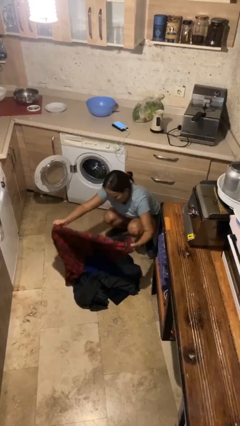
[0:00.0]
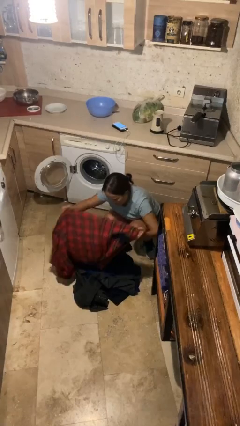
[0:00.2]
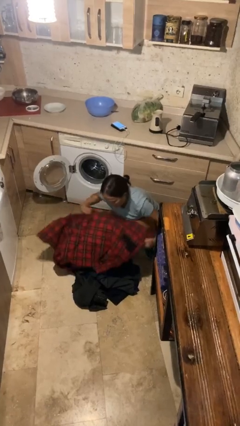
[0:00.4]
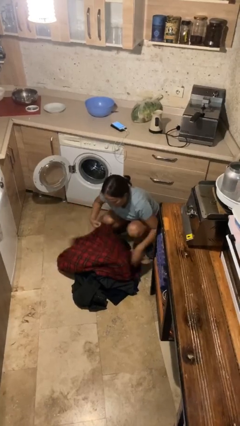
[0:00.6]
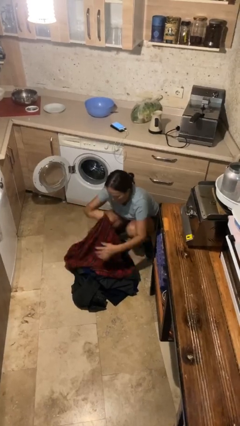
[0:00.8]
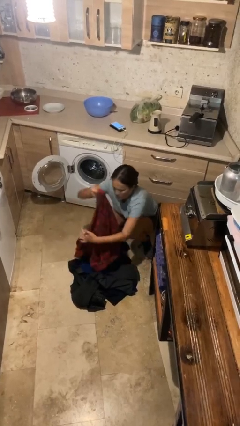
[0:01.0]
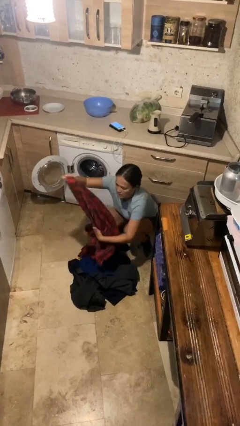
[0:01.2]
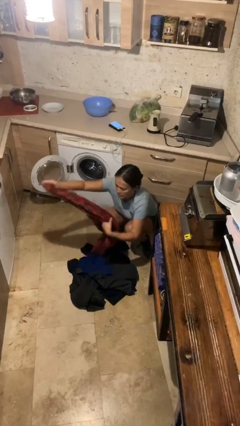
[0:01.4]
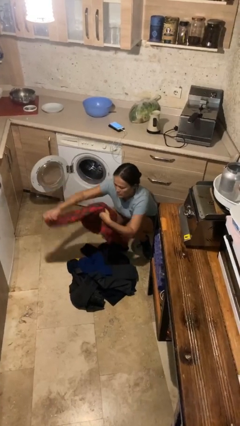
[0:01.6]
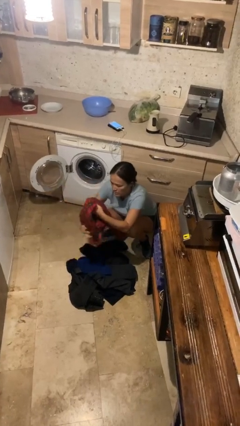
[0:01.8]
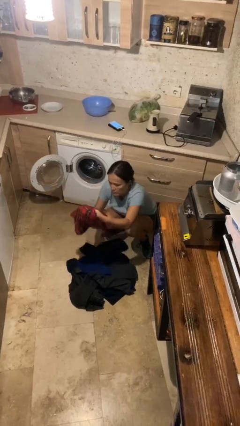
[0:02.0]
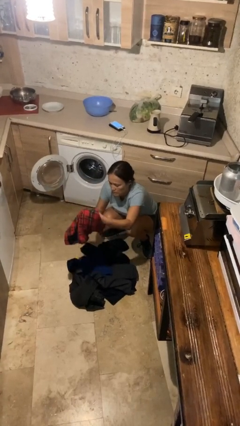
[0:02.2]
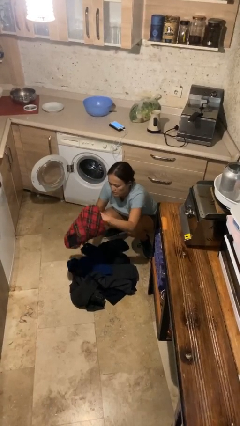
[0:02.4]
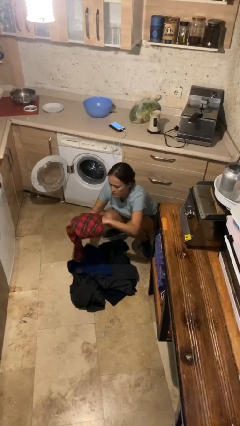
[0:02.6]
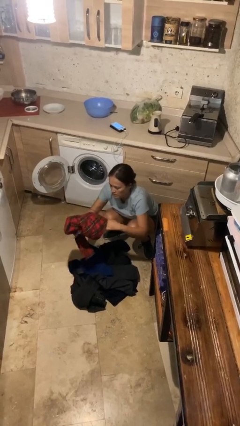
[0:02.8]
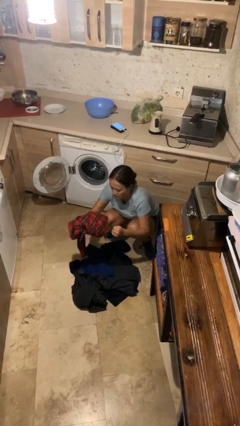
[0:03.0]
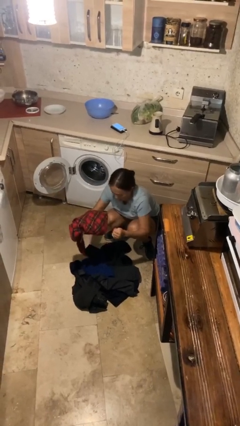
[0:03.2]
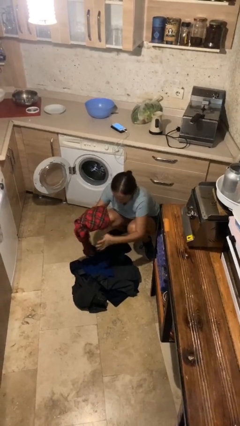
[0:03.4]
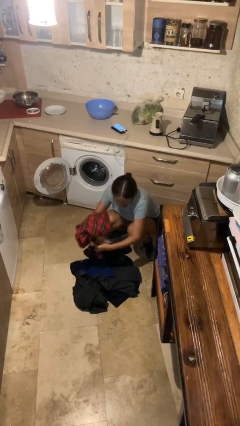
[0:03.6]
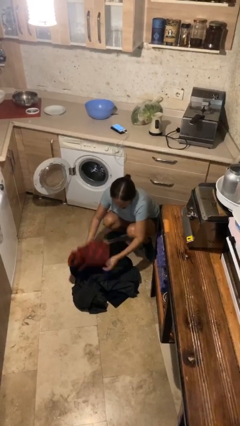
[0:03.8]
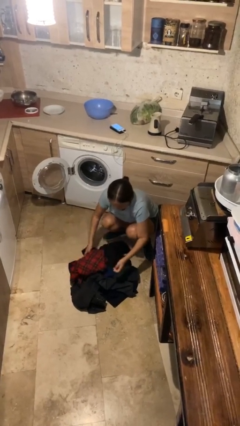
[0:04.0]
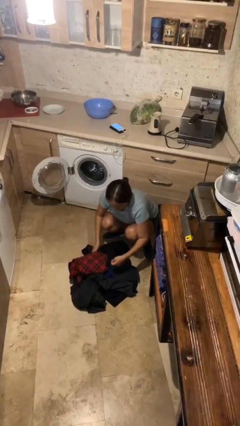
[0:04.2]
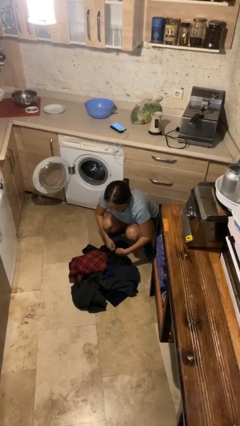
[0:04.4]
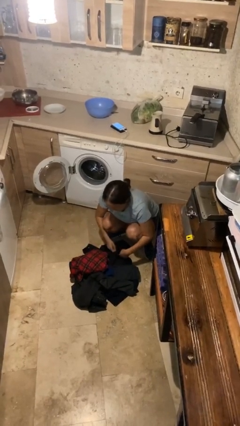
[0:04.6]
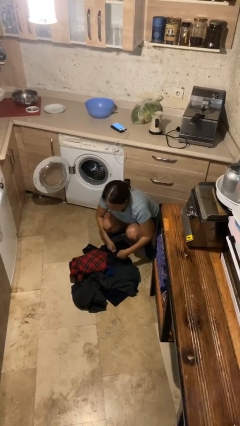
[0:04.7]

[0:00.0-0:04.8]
person folds shirt

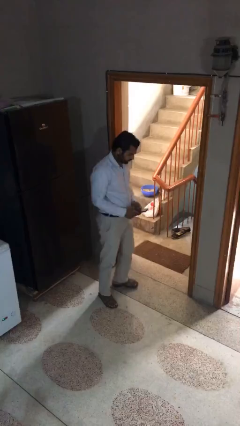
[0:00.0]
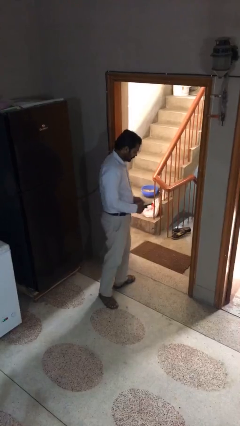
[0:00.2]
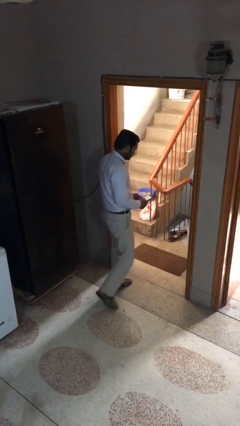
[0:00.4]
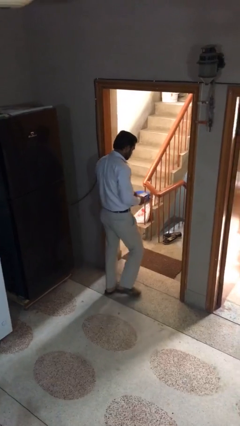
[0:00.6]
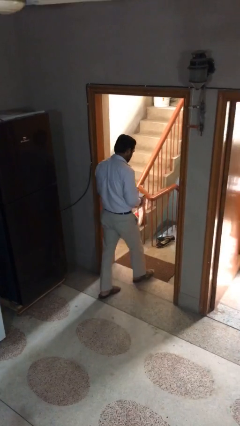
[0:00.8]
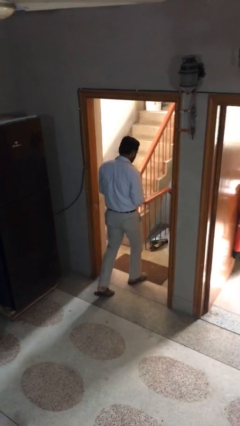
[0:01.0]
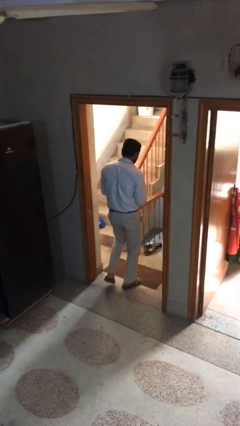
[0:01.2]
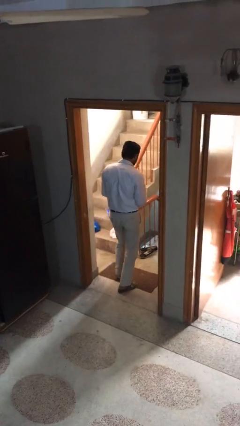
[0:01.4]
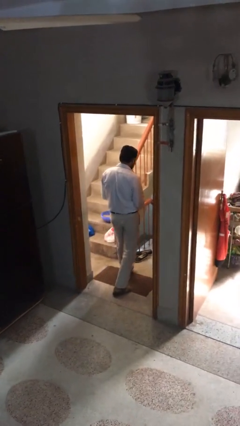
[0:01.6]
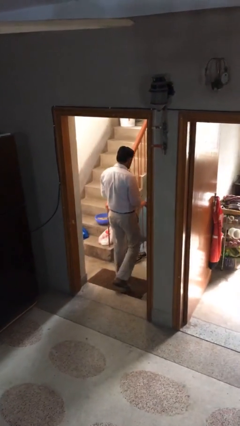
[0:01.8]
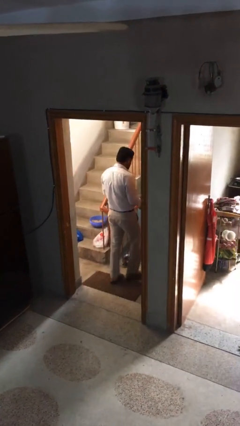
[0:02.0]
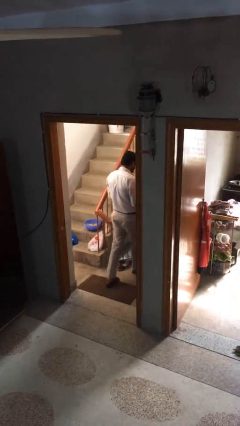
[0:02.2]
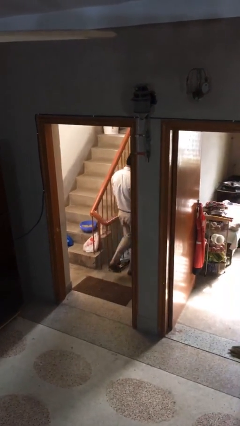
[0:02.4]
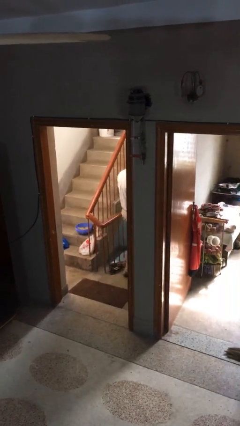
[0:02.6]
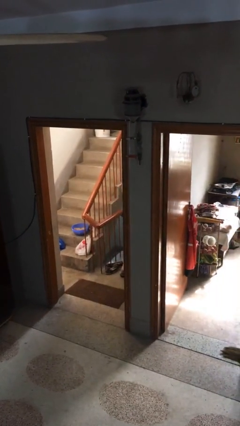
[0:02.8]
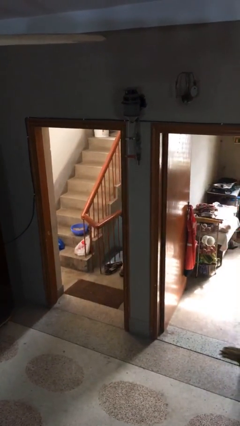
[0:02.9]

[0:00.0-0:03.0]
person exits scene through structure

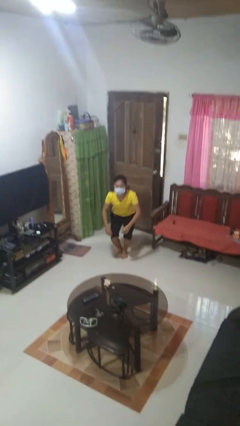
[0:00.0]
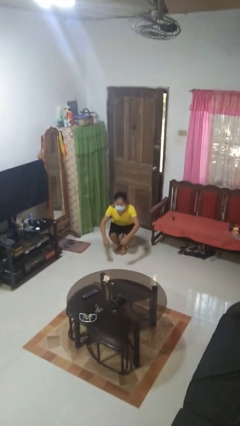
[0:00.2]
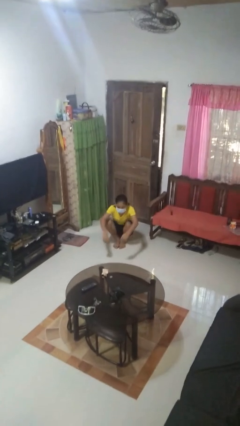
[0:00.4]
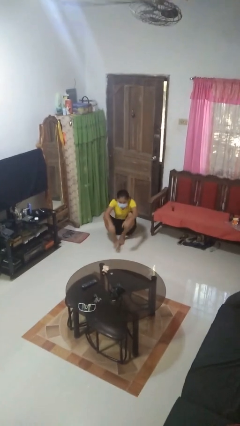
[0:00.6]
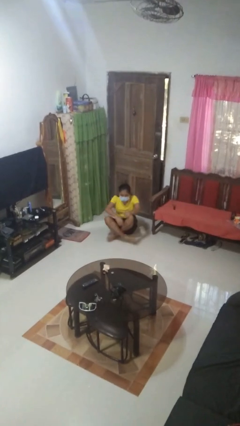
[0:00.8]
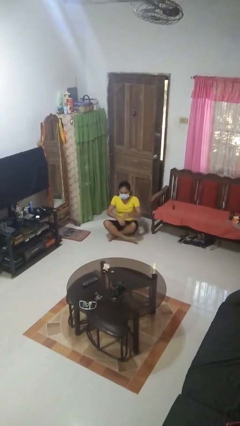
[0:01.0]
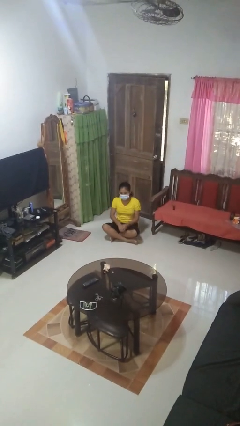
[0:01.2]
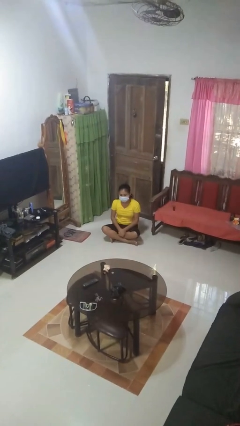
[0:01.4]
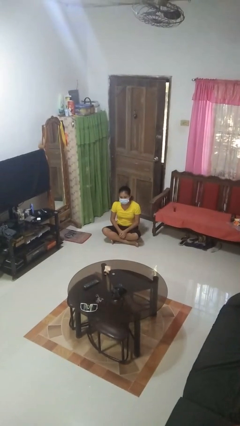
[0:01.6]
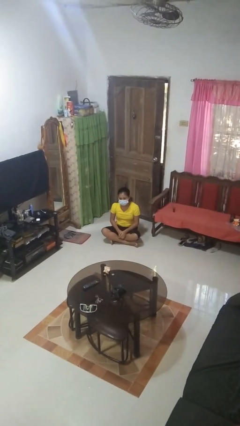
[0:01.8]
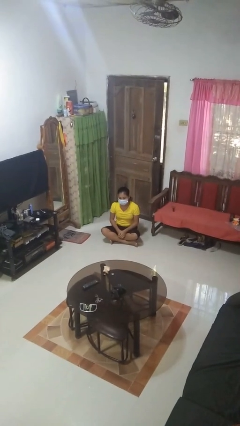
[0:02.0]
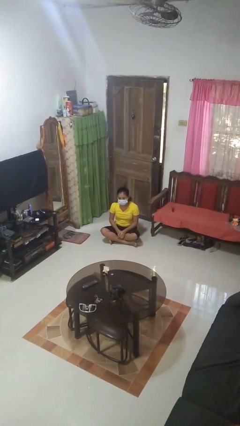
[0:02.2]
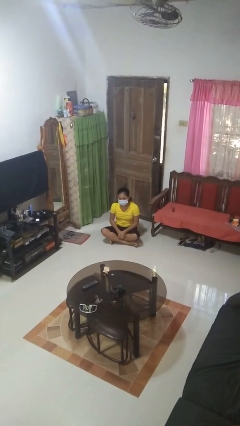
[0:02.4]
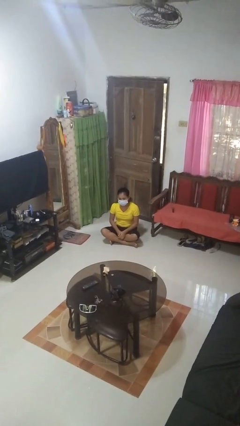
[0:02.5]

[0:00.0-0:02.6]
person sits crisscross

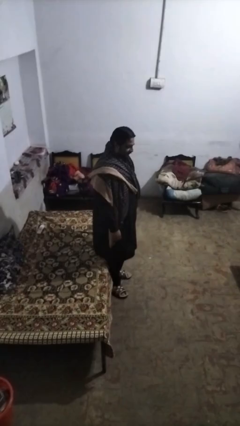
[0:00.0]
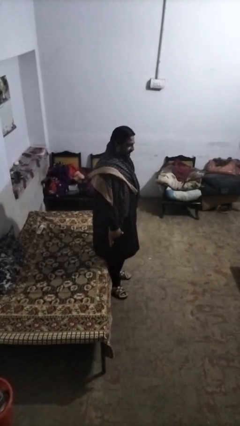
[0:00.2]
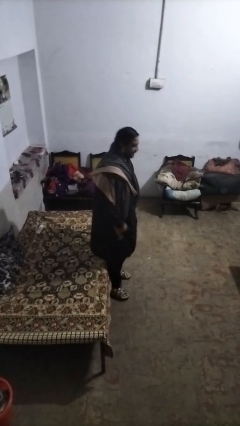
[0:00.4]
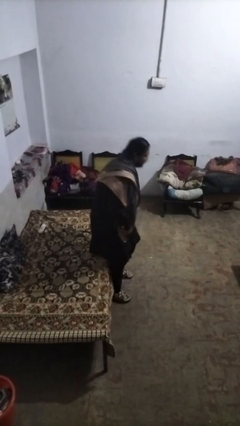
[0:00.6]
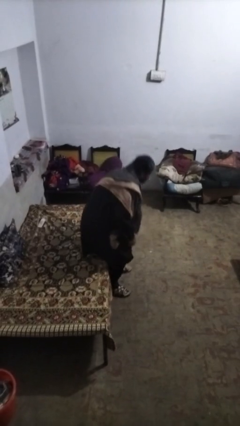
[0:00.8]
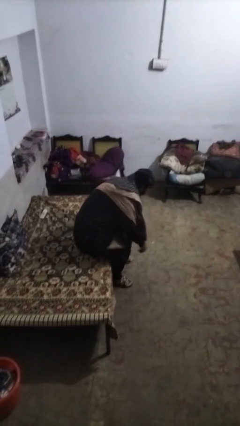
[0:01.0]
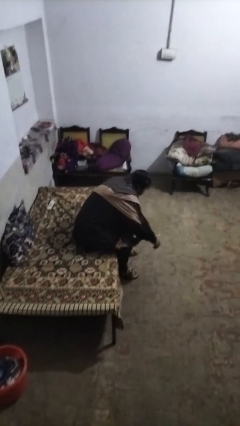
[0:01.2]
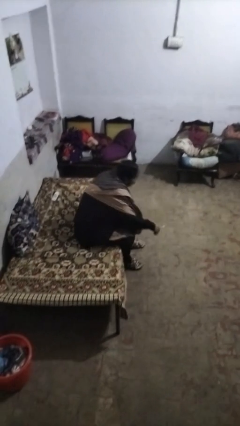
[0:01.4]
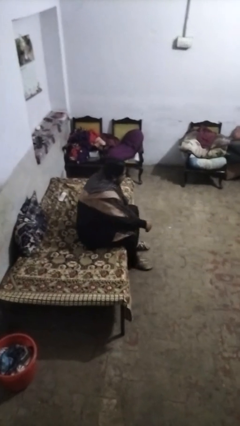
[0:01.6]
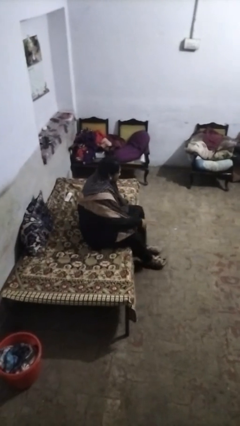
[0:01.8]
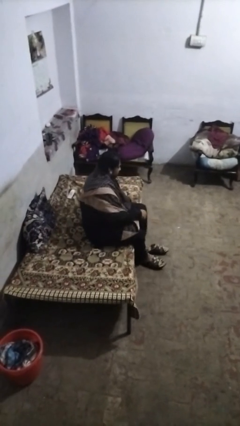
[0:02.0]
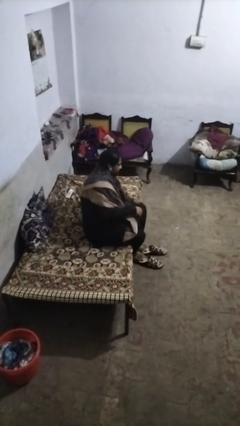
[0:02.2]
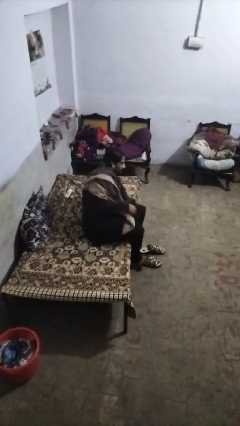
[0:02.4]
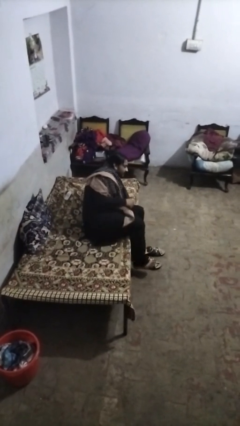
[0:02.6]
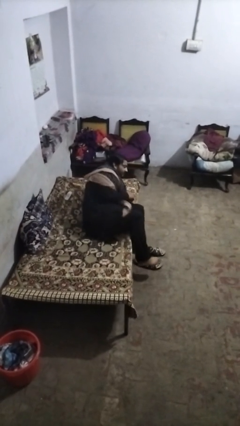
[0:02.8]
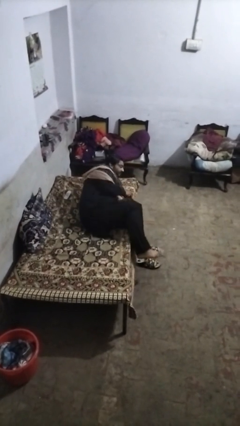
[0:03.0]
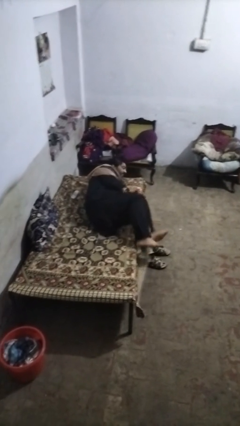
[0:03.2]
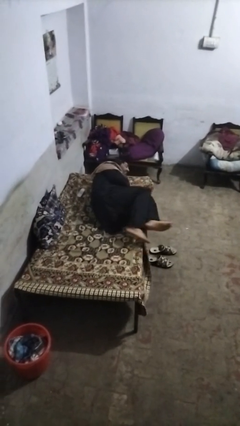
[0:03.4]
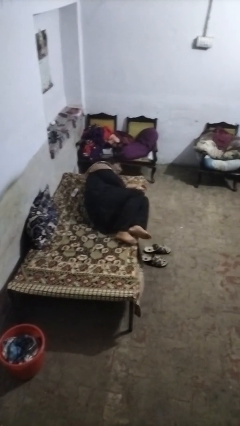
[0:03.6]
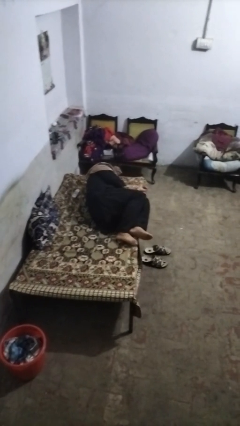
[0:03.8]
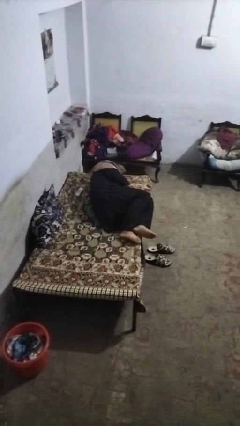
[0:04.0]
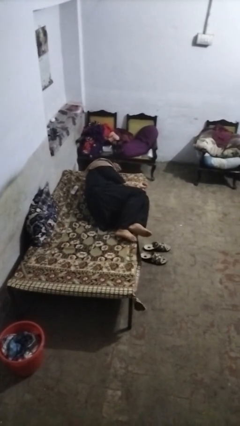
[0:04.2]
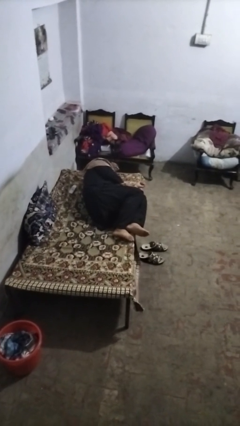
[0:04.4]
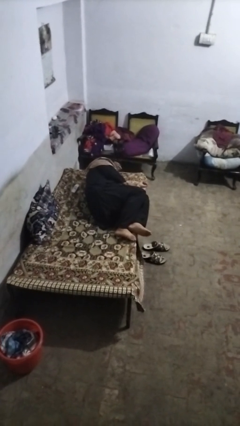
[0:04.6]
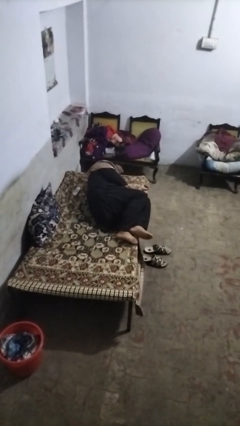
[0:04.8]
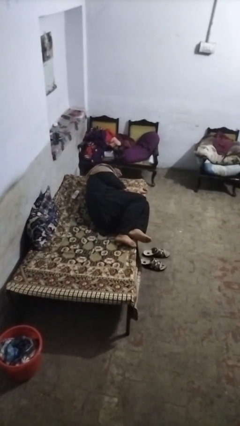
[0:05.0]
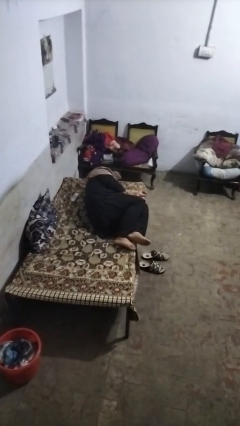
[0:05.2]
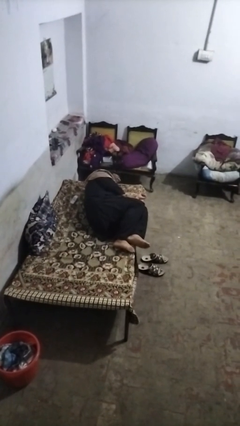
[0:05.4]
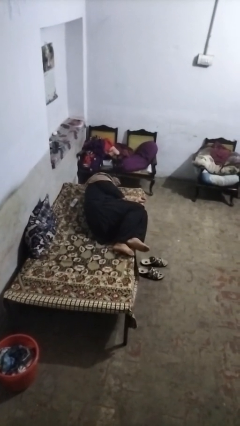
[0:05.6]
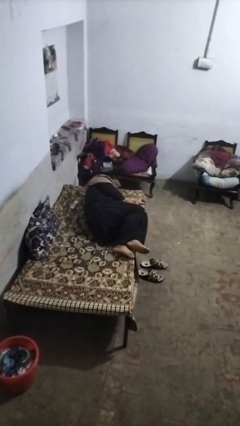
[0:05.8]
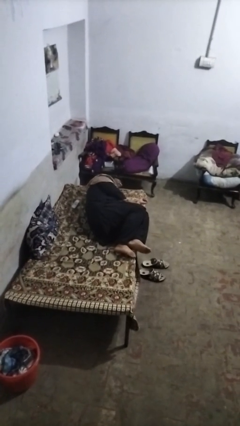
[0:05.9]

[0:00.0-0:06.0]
person lies down on bed

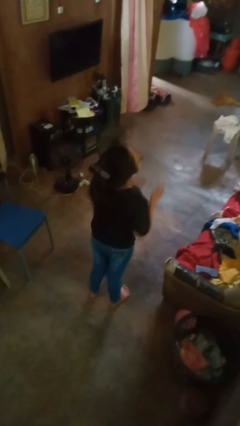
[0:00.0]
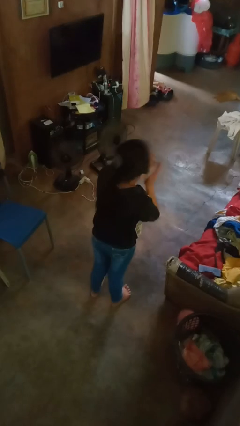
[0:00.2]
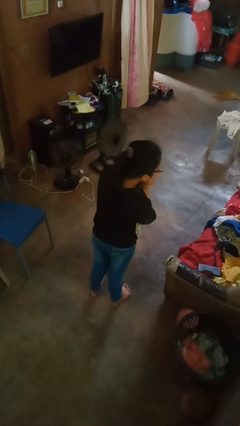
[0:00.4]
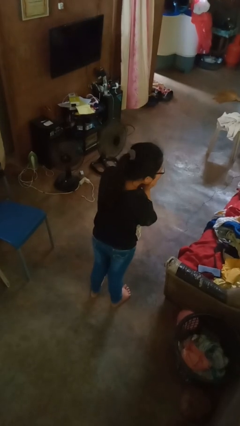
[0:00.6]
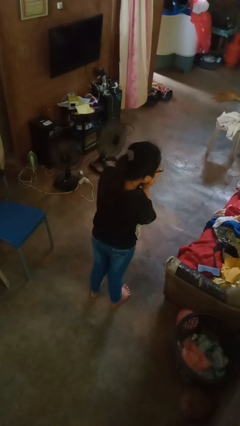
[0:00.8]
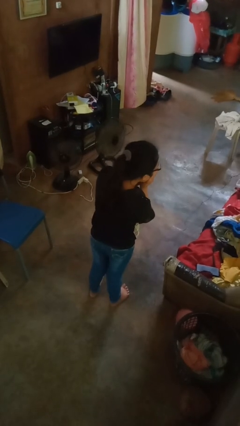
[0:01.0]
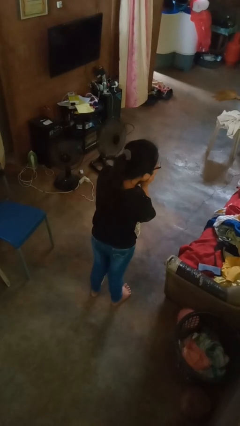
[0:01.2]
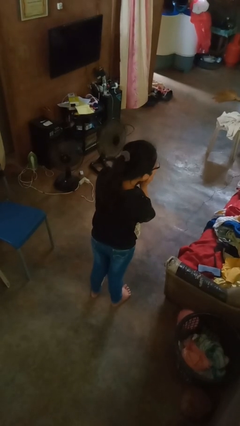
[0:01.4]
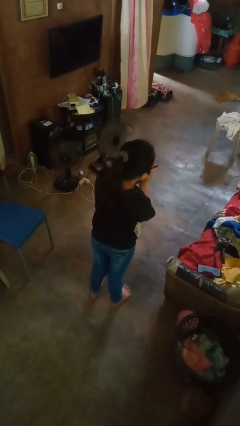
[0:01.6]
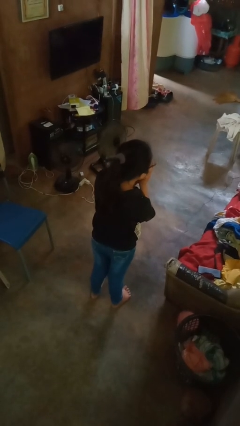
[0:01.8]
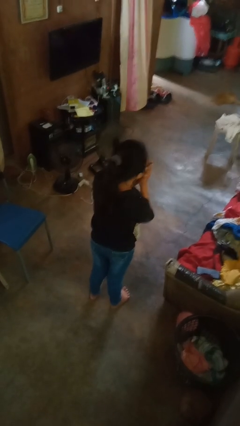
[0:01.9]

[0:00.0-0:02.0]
person sneezes into hand
